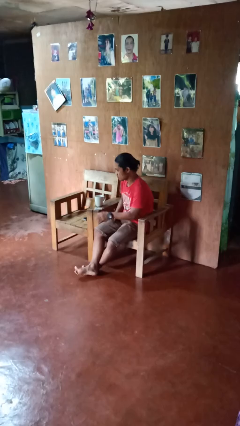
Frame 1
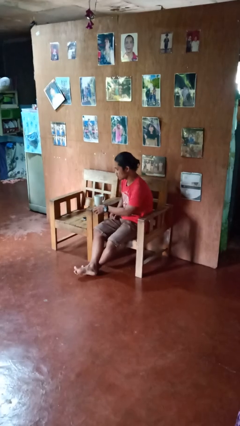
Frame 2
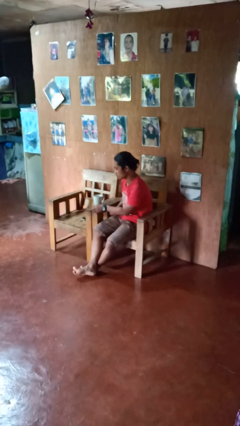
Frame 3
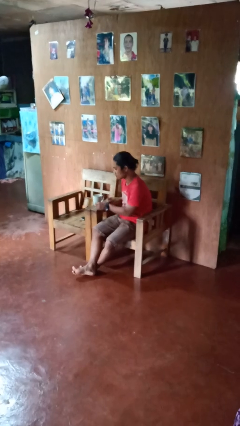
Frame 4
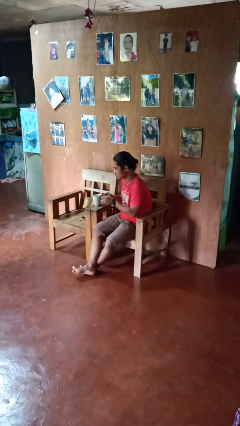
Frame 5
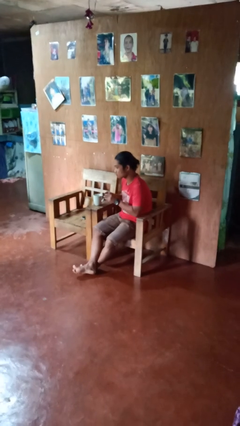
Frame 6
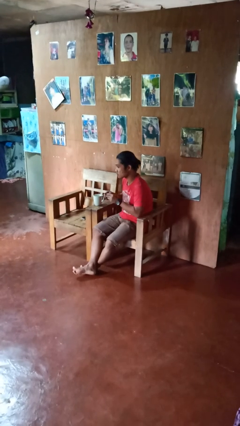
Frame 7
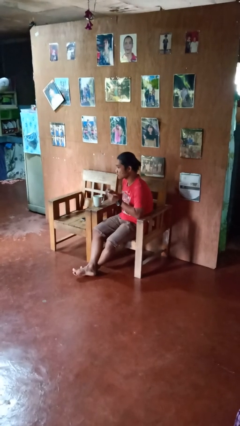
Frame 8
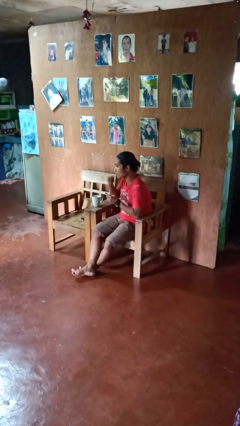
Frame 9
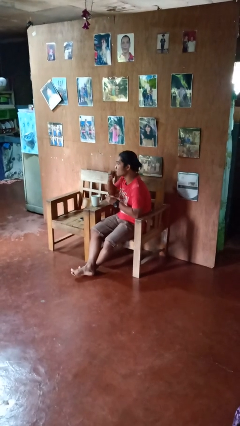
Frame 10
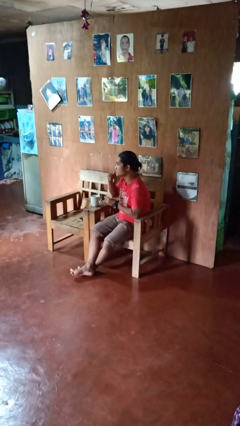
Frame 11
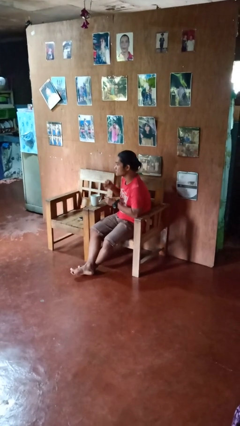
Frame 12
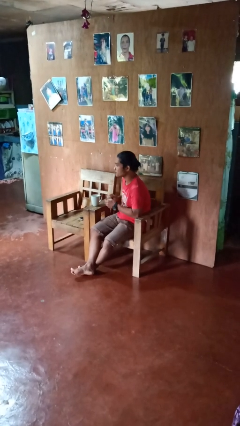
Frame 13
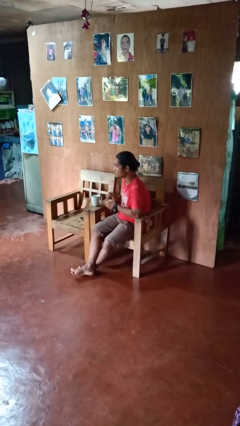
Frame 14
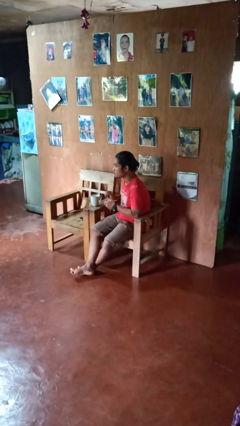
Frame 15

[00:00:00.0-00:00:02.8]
person takes medicine pills

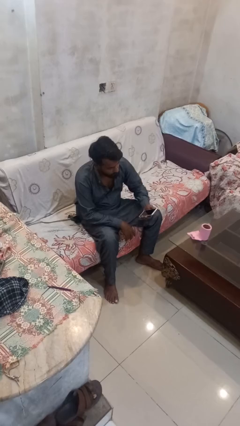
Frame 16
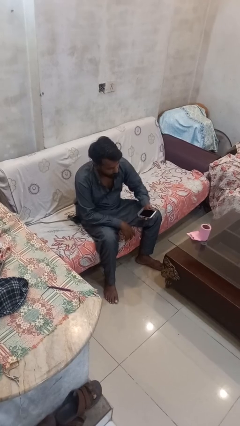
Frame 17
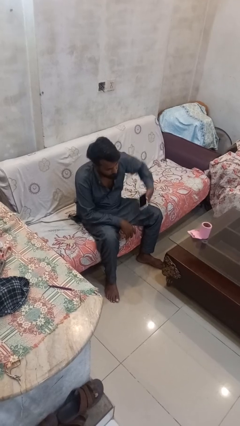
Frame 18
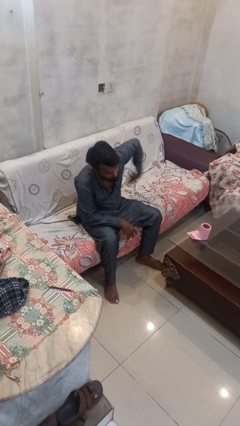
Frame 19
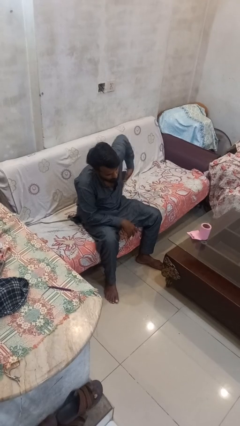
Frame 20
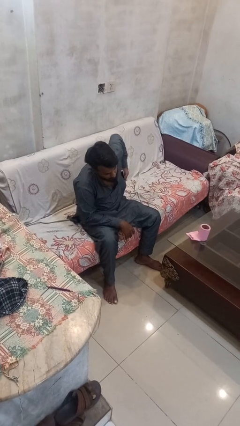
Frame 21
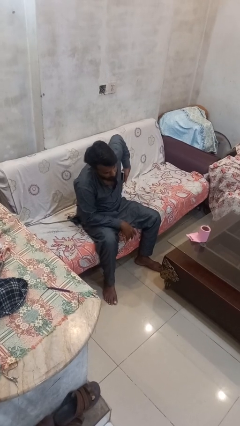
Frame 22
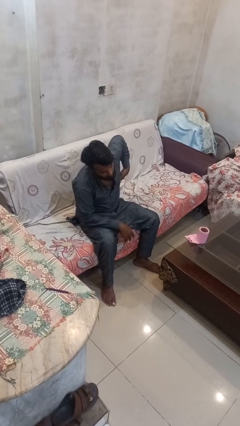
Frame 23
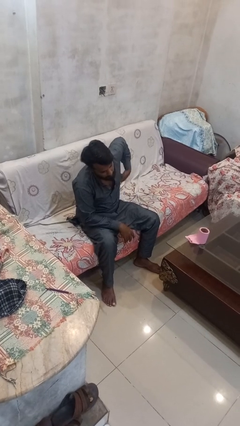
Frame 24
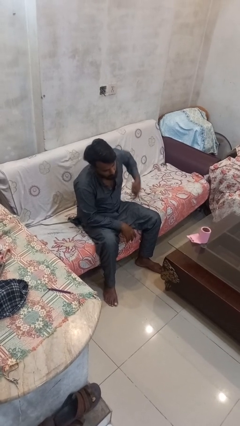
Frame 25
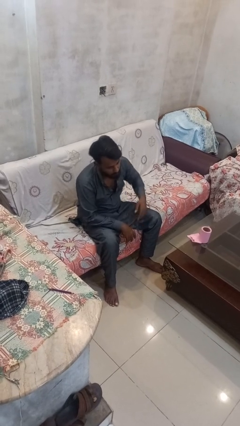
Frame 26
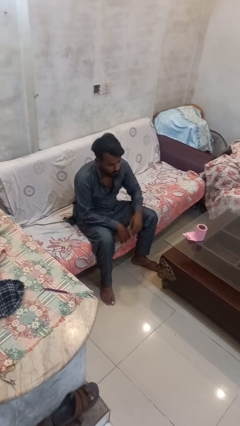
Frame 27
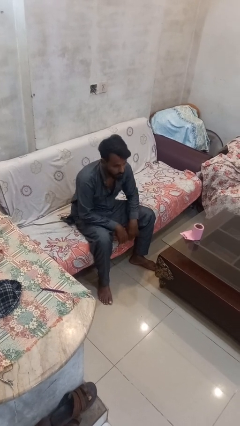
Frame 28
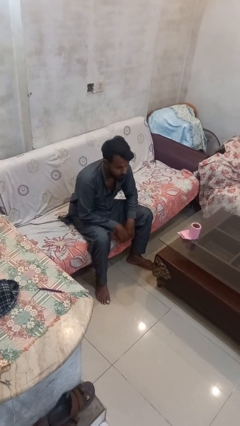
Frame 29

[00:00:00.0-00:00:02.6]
person puts phone into pocket

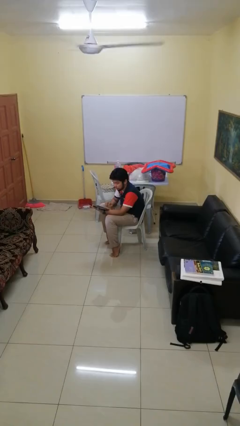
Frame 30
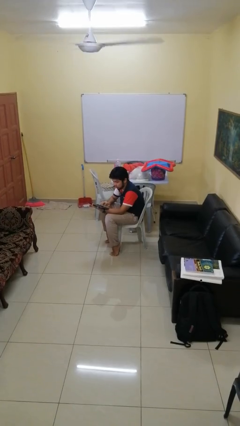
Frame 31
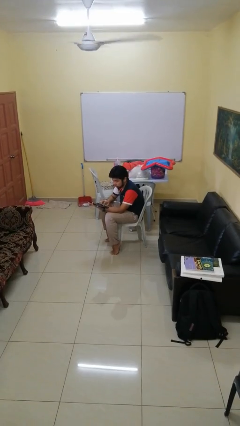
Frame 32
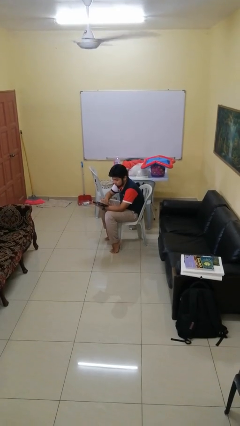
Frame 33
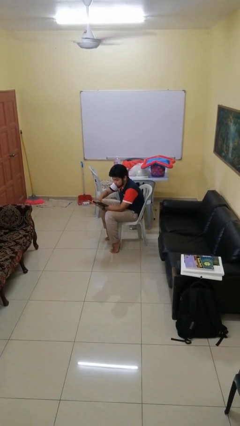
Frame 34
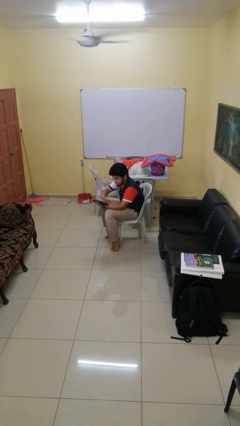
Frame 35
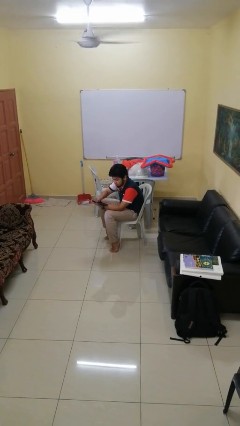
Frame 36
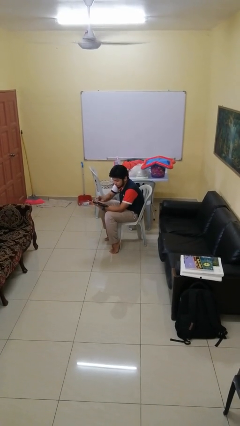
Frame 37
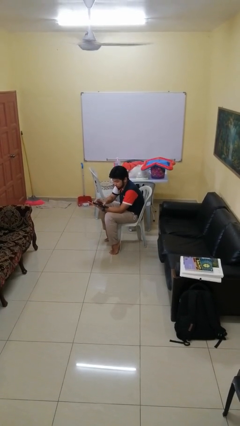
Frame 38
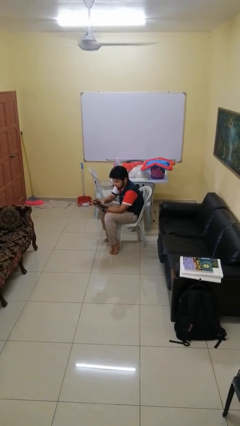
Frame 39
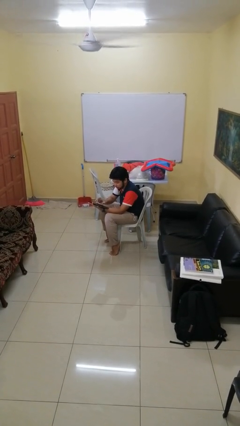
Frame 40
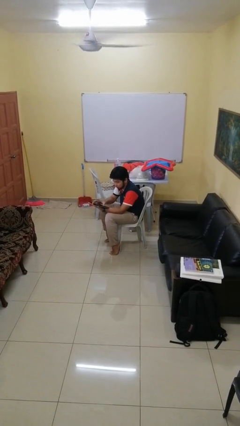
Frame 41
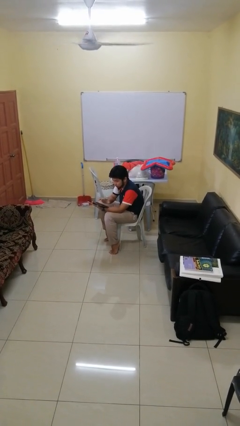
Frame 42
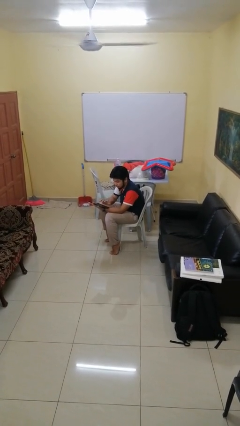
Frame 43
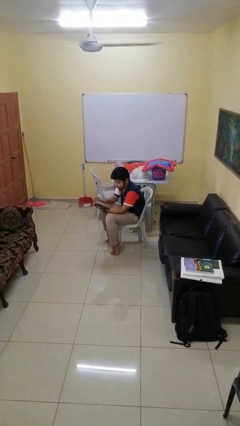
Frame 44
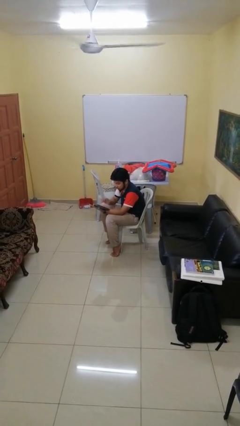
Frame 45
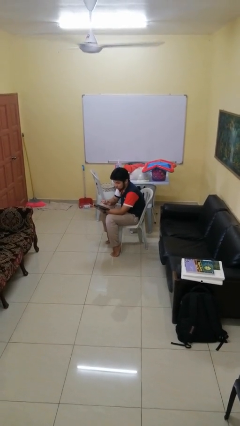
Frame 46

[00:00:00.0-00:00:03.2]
person interacts with tablet

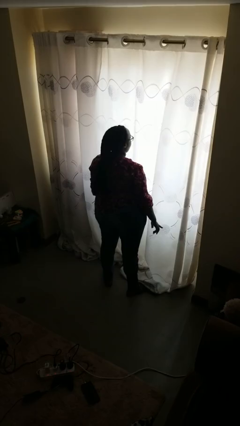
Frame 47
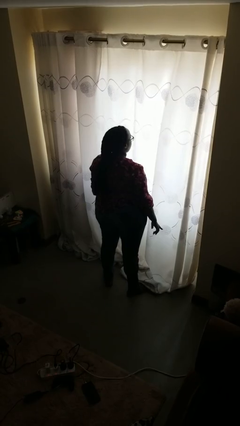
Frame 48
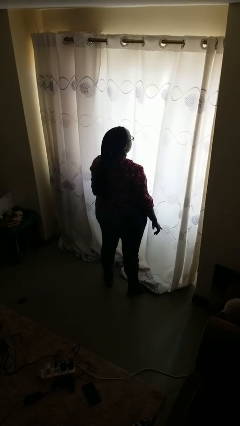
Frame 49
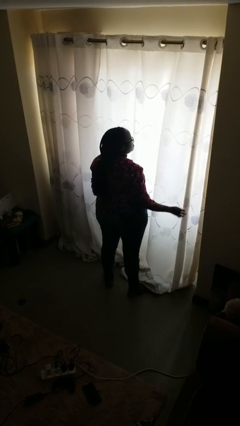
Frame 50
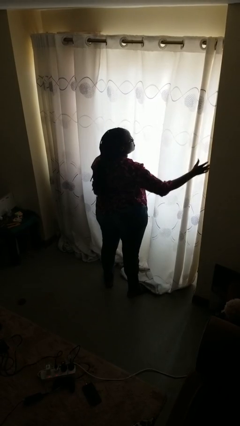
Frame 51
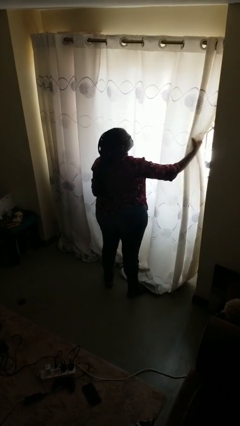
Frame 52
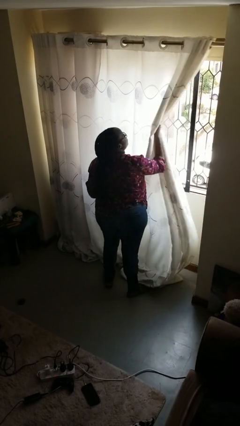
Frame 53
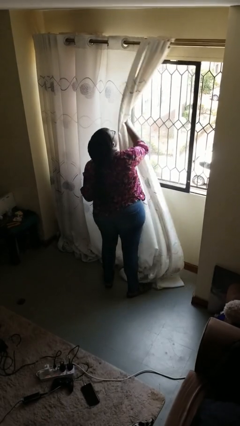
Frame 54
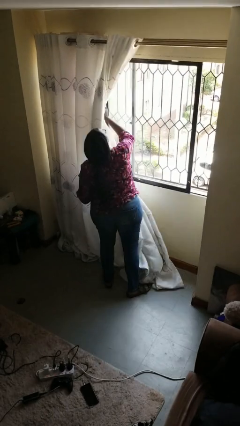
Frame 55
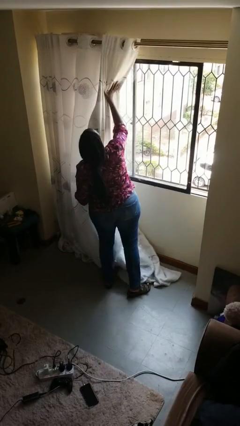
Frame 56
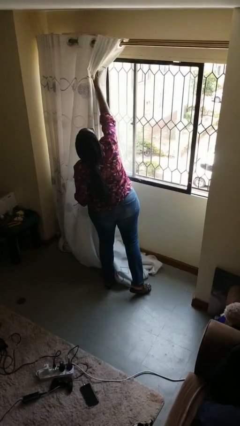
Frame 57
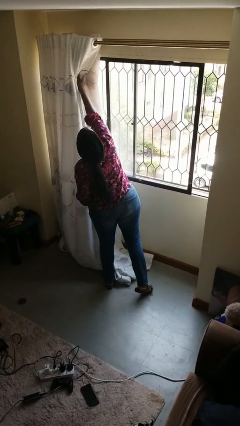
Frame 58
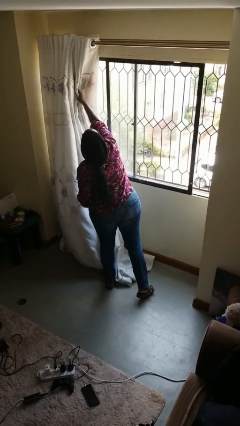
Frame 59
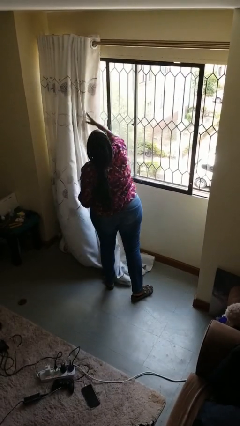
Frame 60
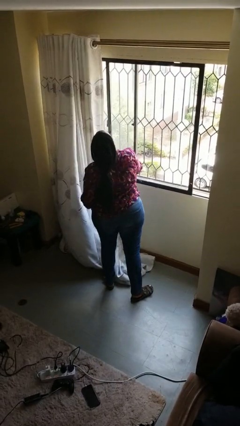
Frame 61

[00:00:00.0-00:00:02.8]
person opens curtains

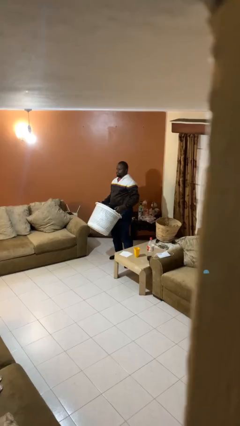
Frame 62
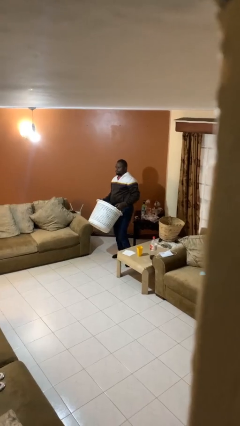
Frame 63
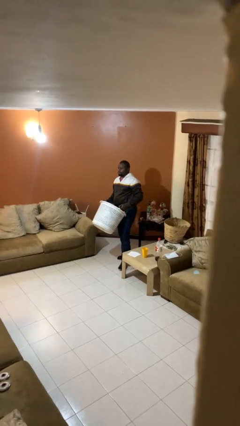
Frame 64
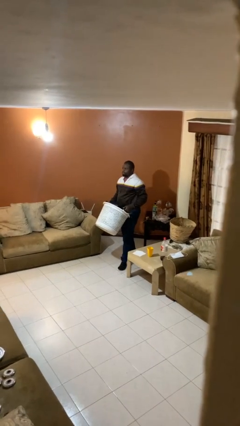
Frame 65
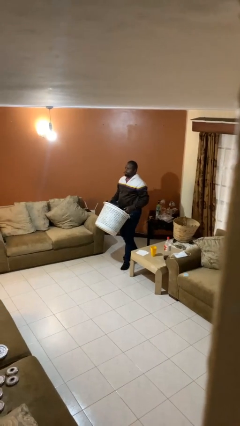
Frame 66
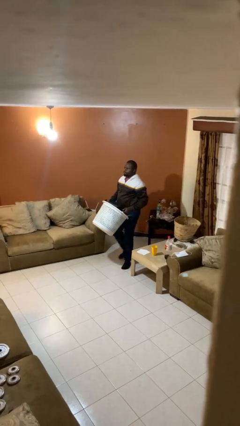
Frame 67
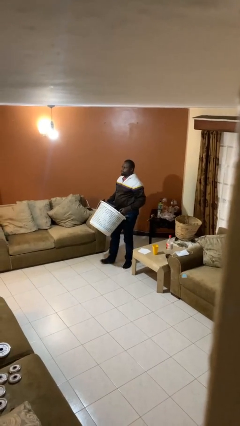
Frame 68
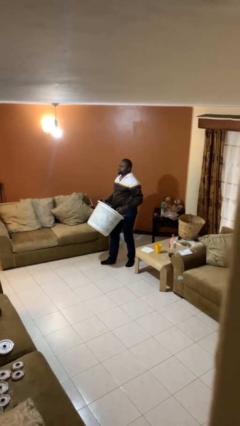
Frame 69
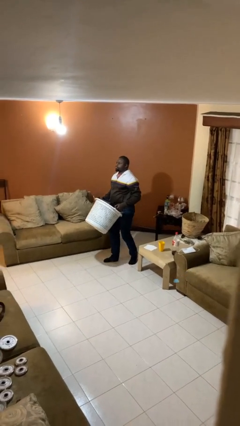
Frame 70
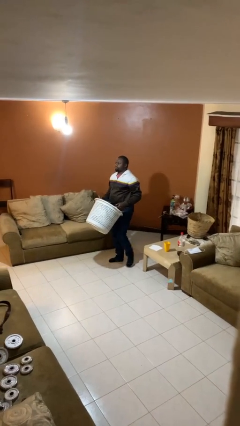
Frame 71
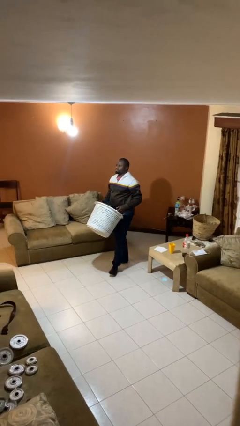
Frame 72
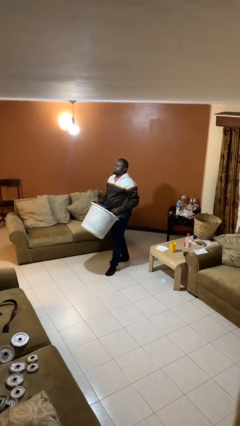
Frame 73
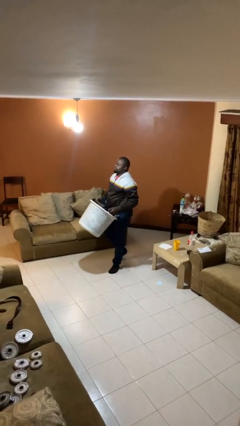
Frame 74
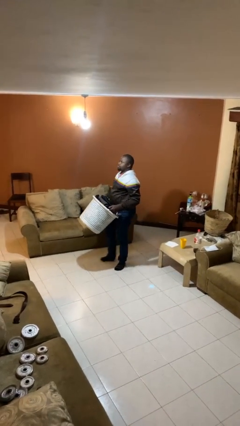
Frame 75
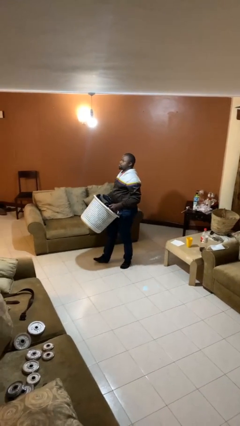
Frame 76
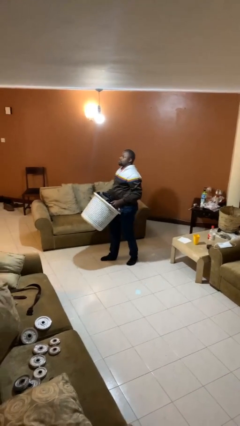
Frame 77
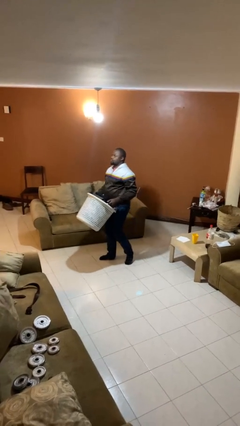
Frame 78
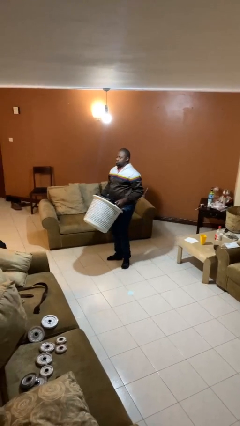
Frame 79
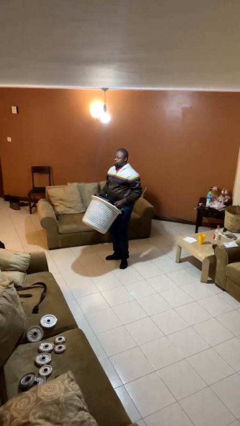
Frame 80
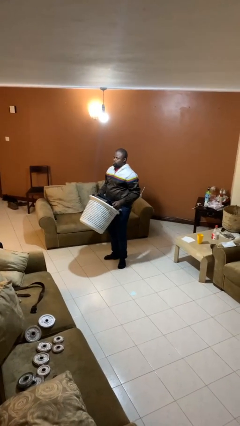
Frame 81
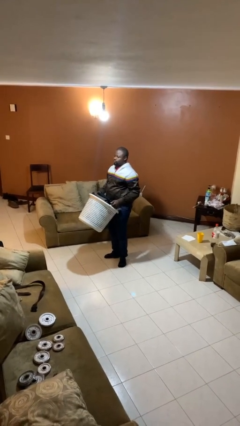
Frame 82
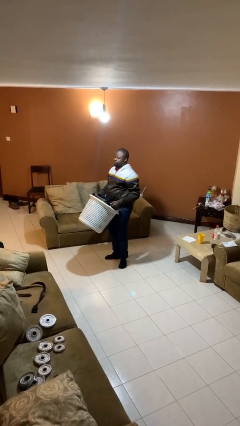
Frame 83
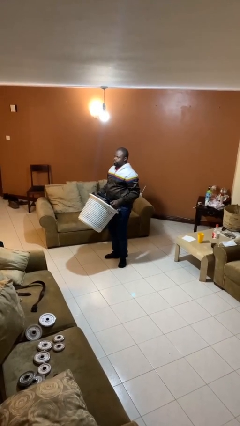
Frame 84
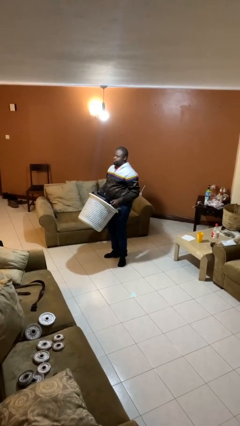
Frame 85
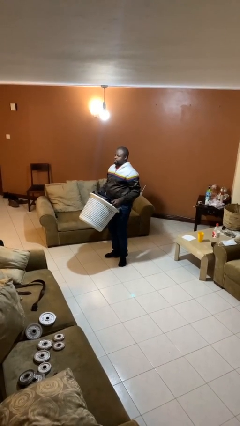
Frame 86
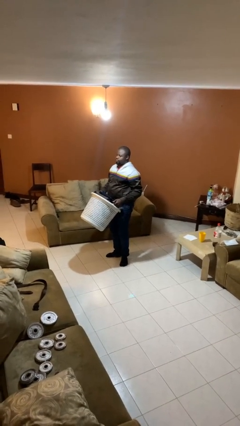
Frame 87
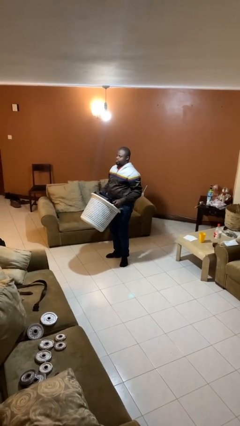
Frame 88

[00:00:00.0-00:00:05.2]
person carries laundry basket

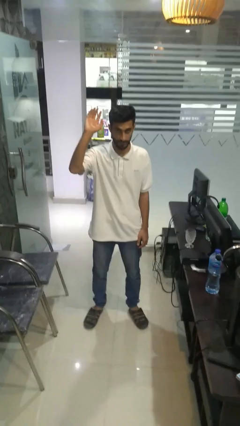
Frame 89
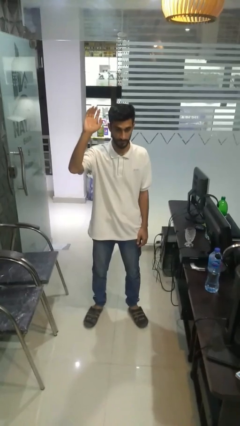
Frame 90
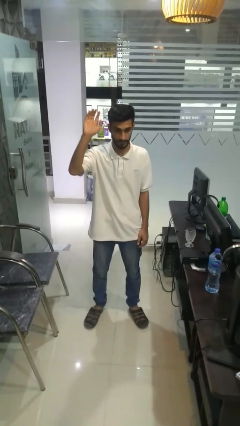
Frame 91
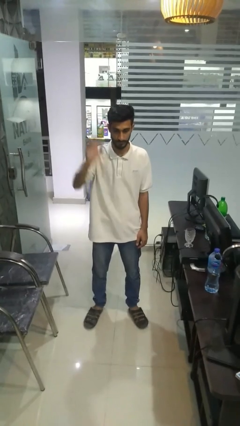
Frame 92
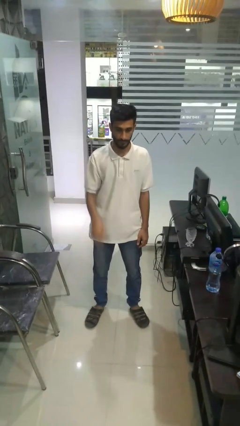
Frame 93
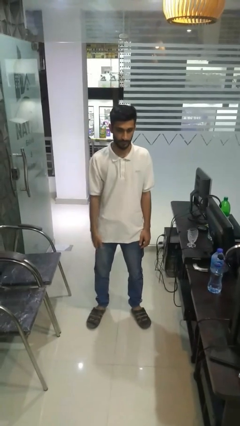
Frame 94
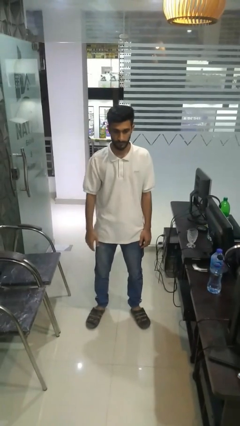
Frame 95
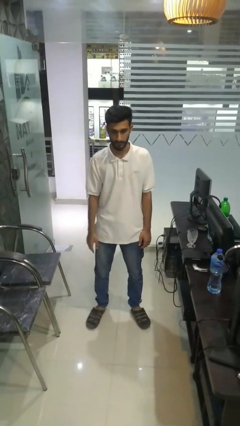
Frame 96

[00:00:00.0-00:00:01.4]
person gestures lower hand
